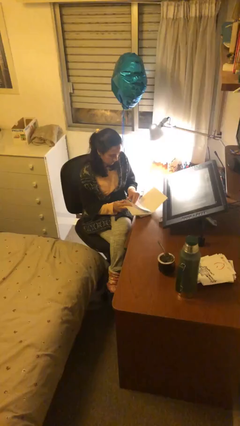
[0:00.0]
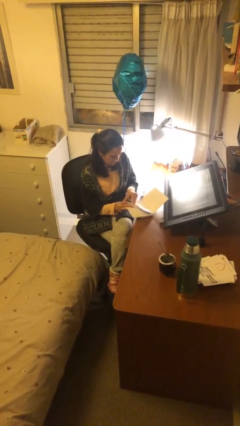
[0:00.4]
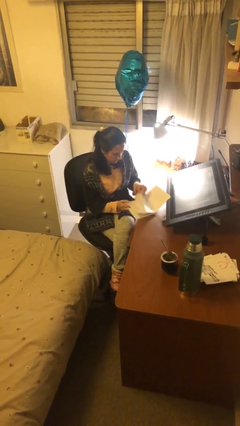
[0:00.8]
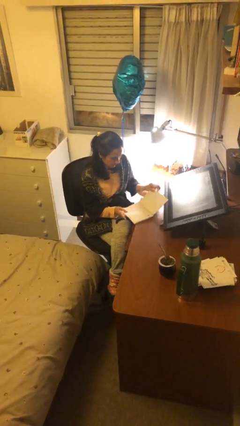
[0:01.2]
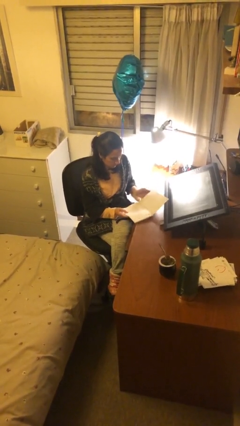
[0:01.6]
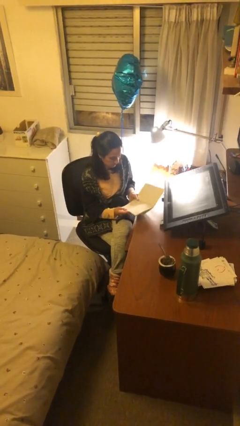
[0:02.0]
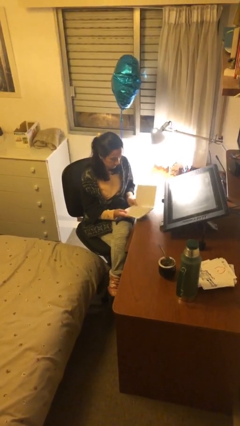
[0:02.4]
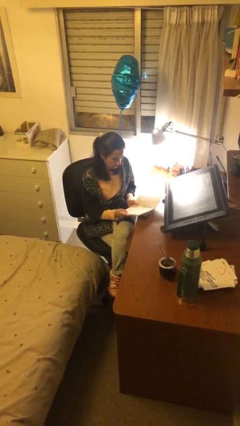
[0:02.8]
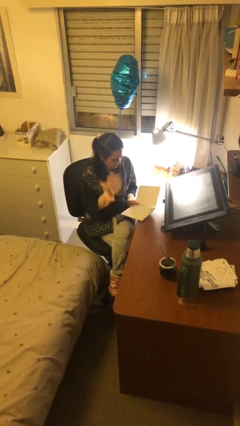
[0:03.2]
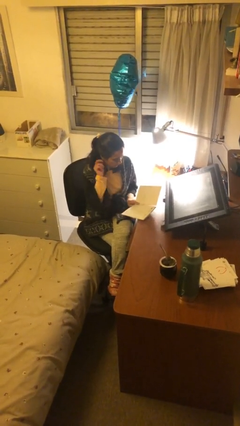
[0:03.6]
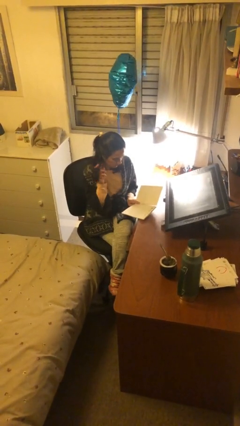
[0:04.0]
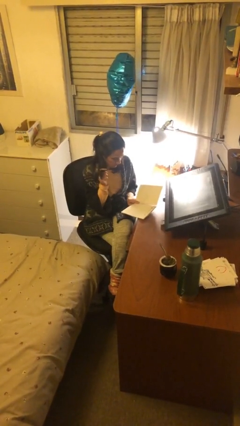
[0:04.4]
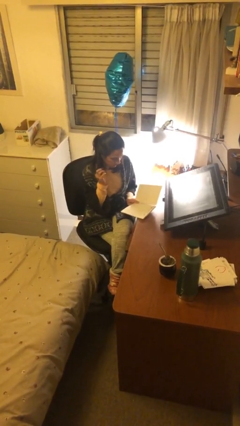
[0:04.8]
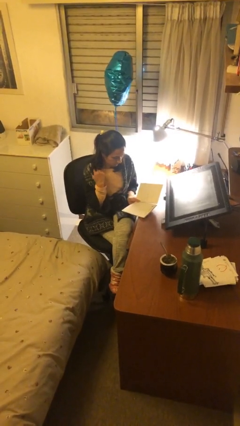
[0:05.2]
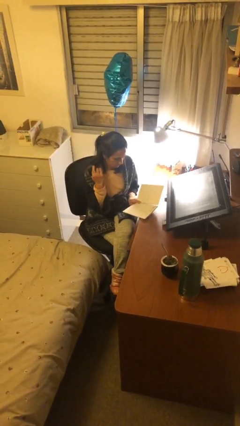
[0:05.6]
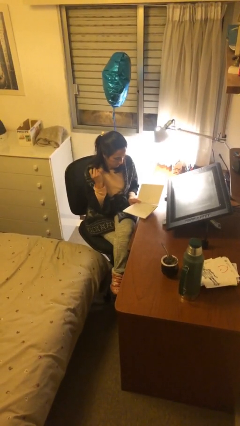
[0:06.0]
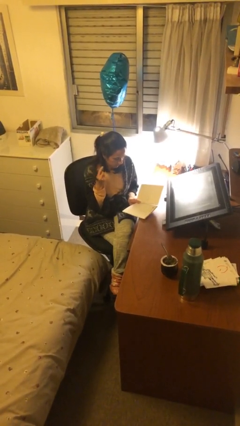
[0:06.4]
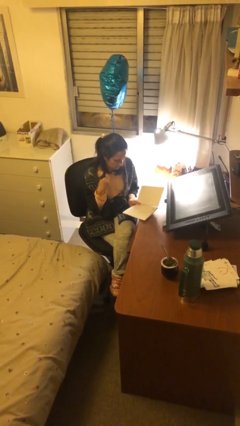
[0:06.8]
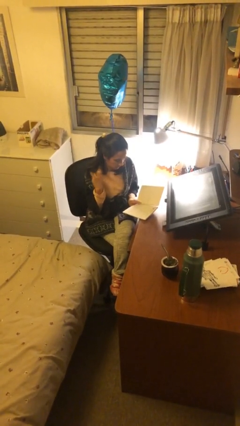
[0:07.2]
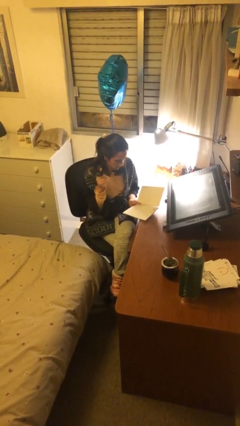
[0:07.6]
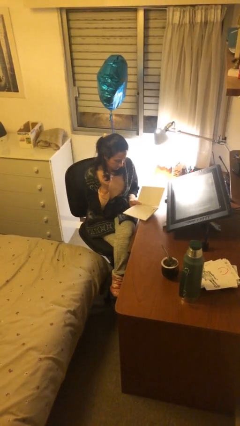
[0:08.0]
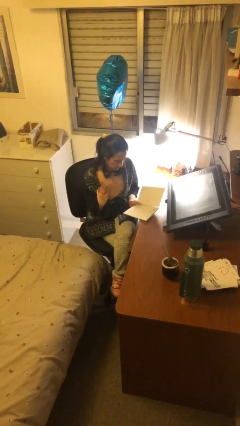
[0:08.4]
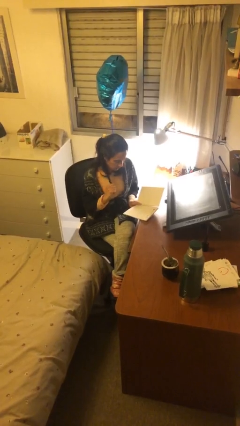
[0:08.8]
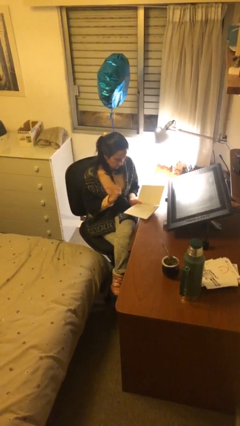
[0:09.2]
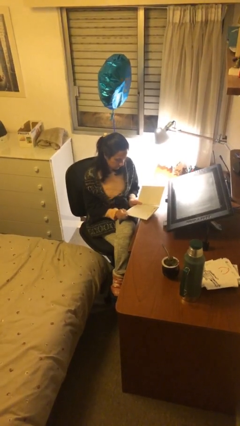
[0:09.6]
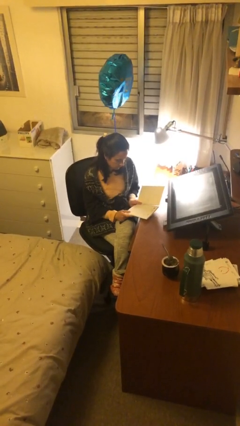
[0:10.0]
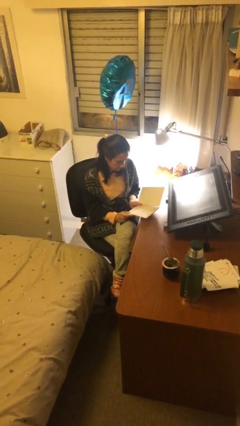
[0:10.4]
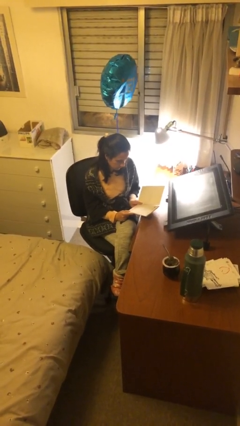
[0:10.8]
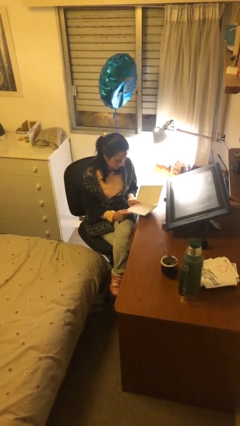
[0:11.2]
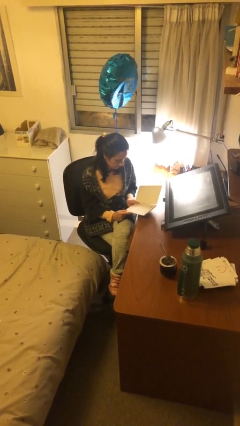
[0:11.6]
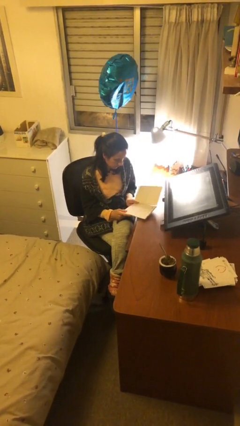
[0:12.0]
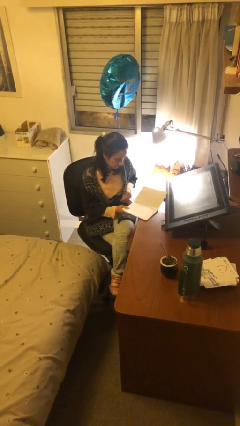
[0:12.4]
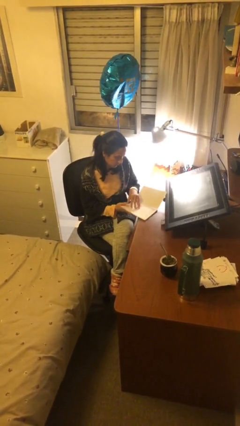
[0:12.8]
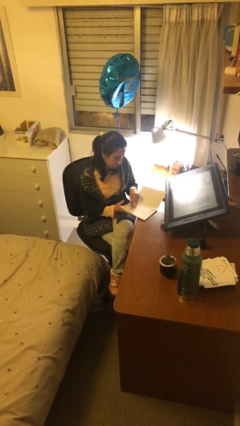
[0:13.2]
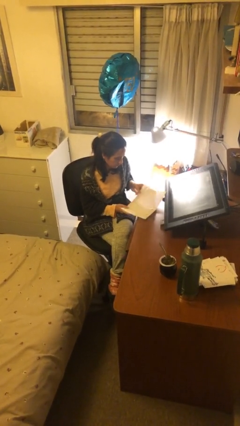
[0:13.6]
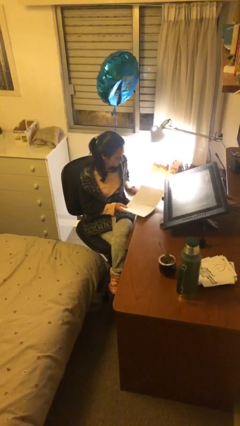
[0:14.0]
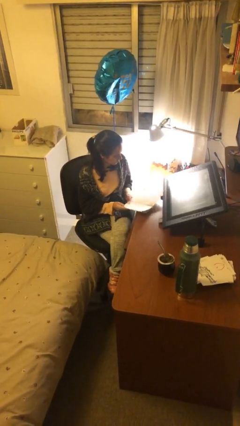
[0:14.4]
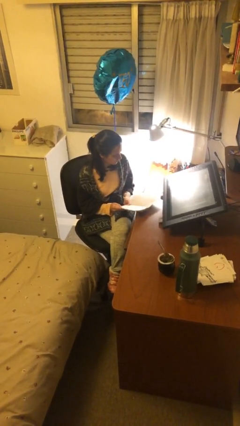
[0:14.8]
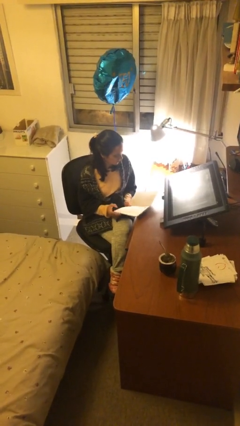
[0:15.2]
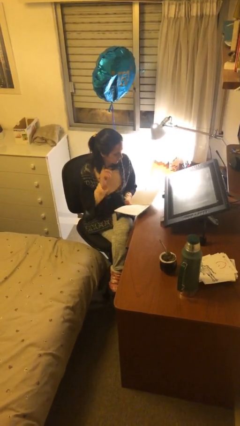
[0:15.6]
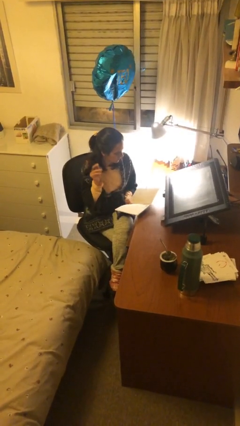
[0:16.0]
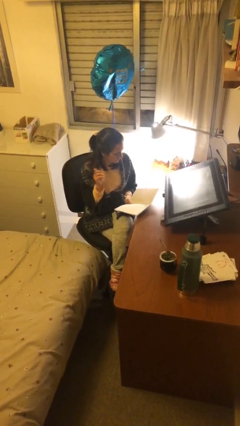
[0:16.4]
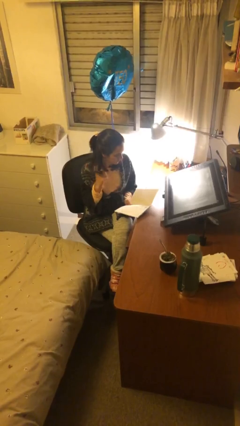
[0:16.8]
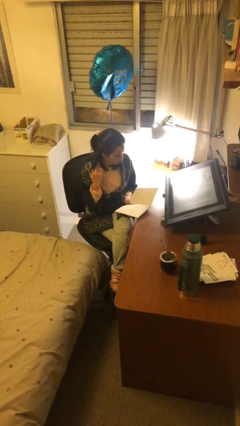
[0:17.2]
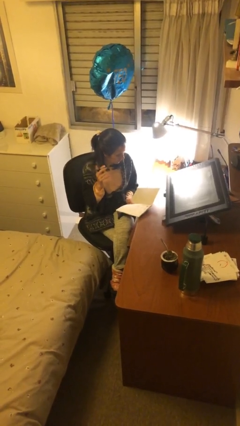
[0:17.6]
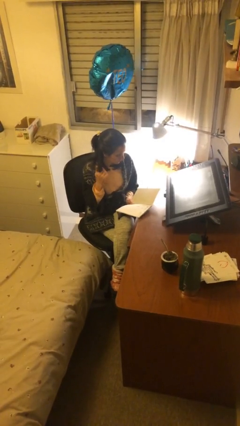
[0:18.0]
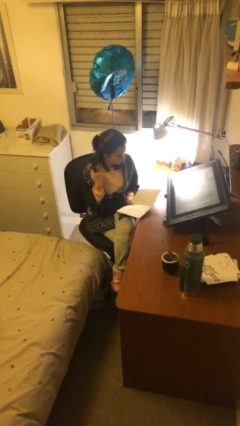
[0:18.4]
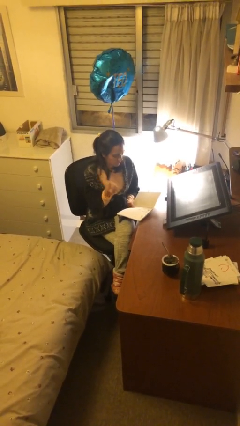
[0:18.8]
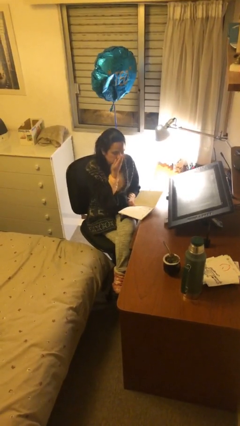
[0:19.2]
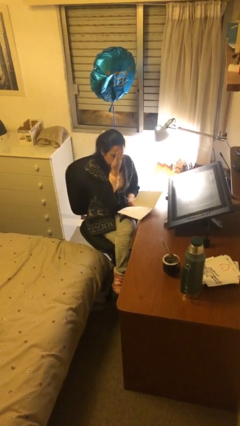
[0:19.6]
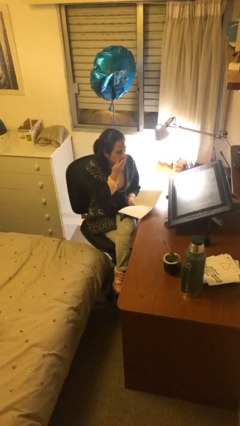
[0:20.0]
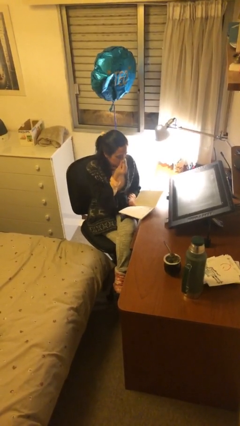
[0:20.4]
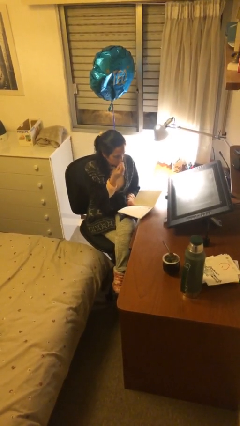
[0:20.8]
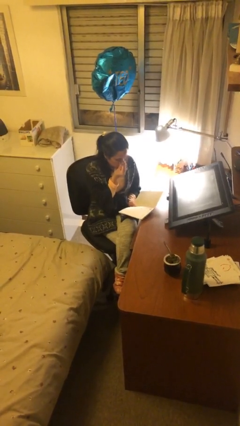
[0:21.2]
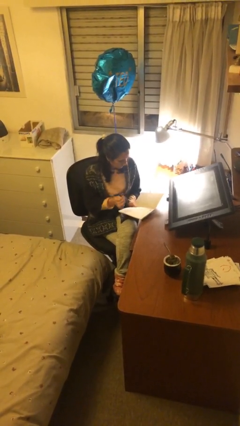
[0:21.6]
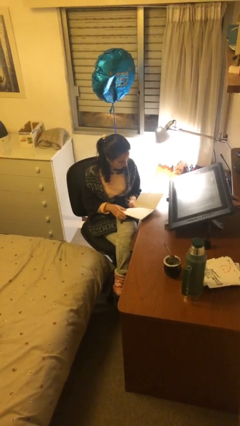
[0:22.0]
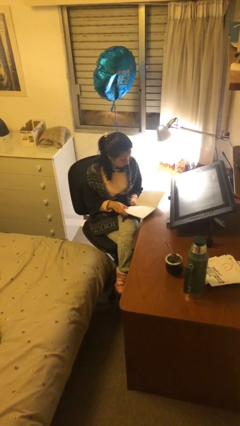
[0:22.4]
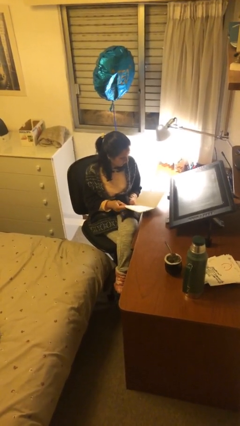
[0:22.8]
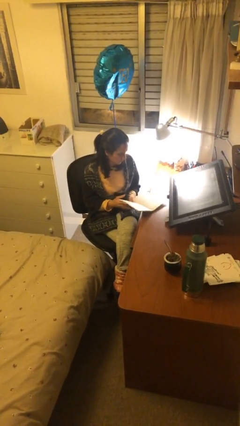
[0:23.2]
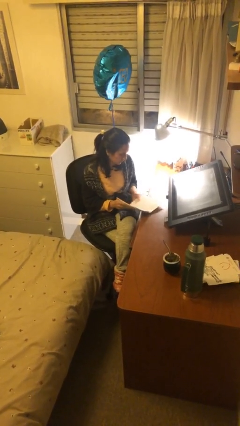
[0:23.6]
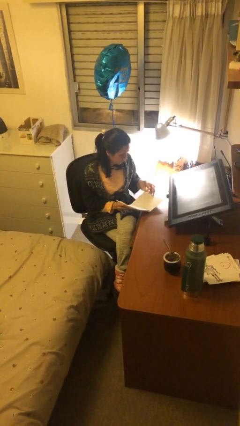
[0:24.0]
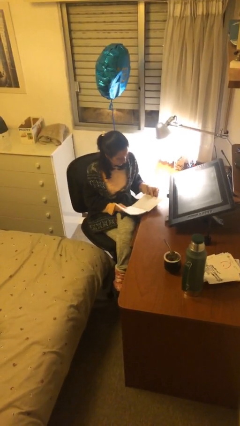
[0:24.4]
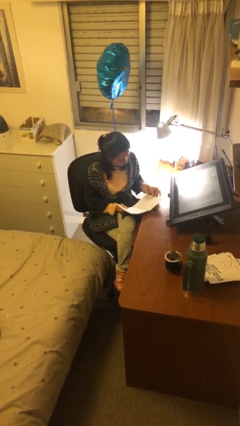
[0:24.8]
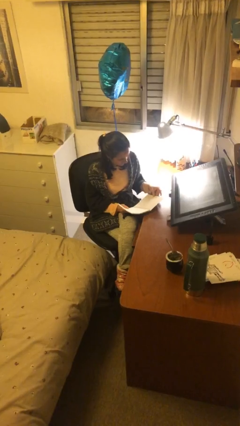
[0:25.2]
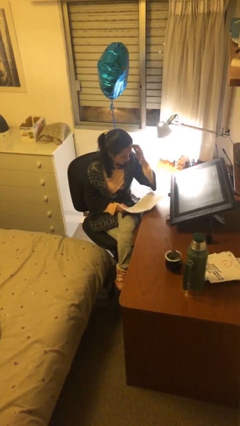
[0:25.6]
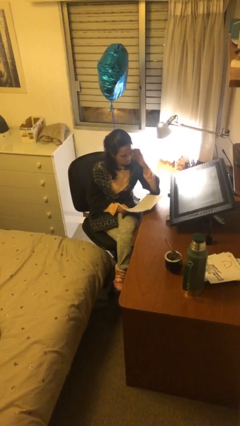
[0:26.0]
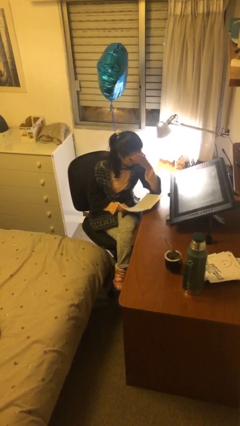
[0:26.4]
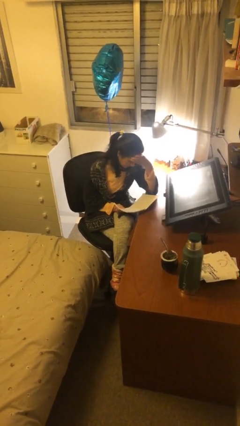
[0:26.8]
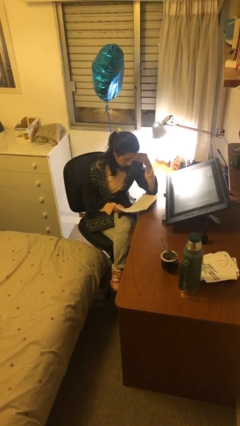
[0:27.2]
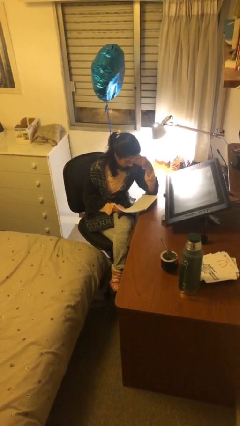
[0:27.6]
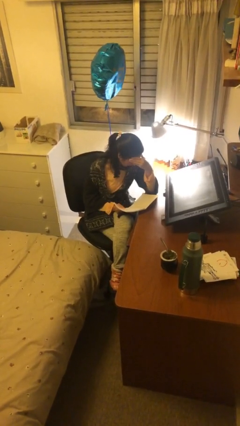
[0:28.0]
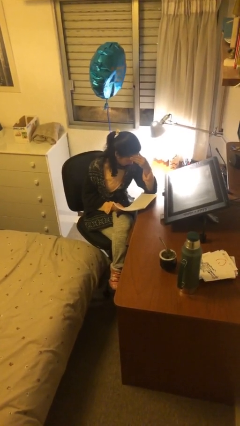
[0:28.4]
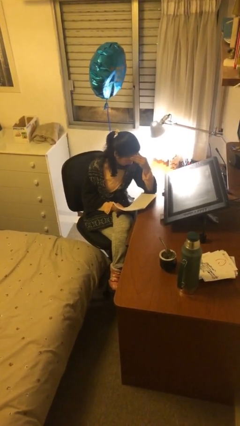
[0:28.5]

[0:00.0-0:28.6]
person reads document

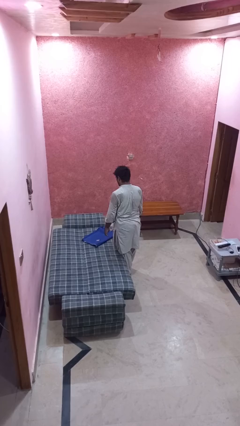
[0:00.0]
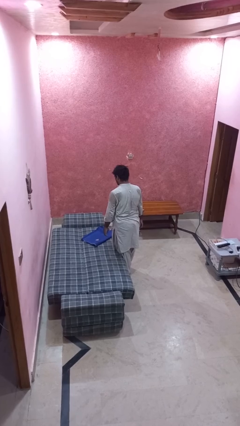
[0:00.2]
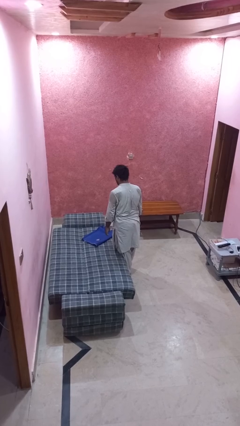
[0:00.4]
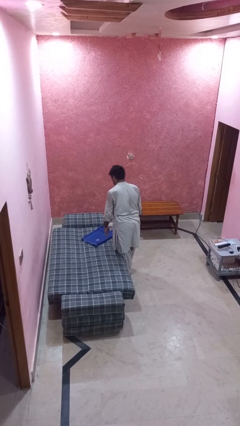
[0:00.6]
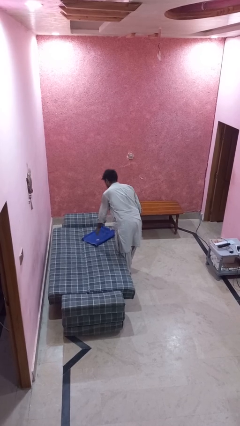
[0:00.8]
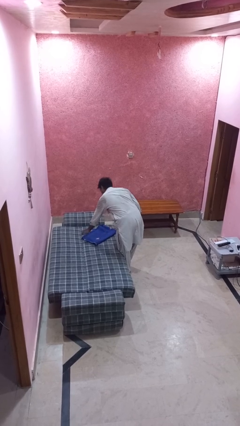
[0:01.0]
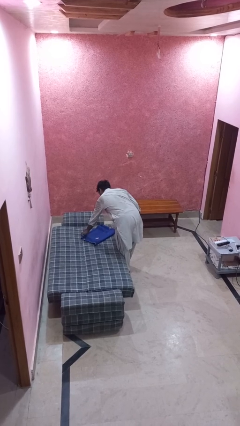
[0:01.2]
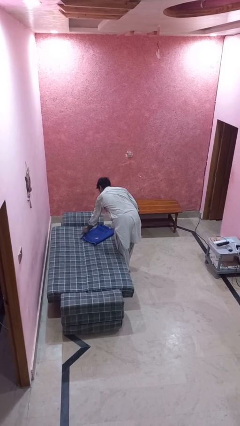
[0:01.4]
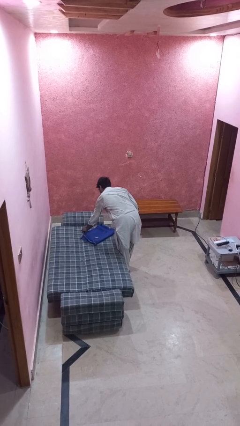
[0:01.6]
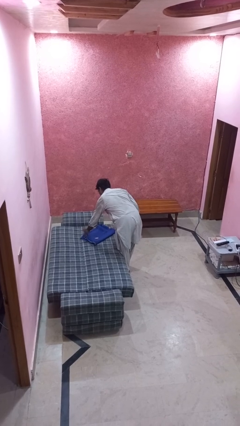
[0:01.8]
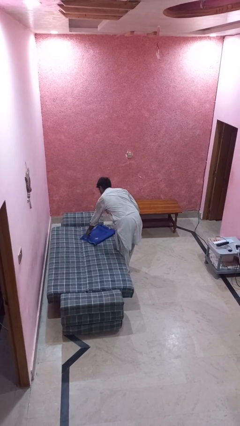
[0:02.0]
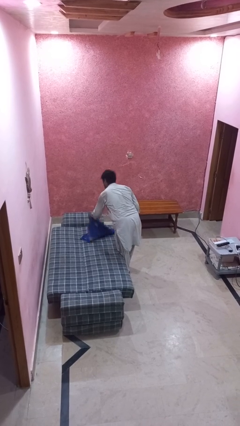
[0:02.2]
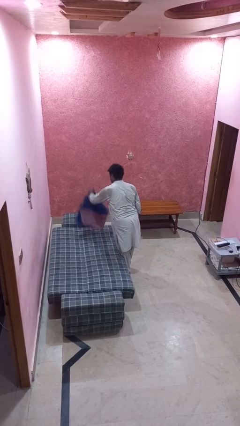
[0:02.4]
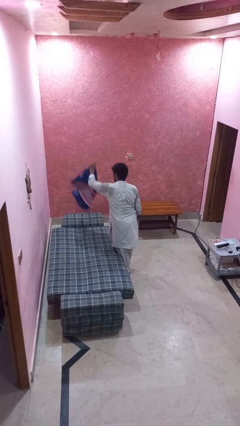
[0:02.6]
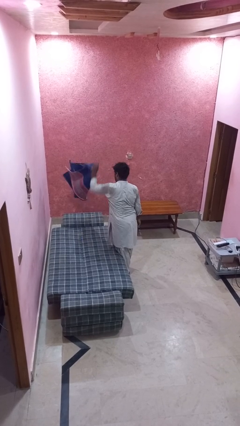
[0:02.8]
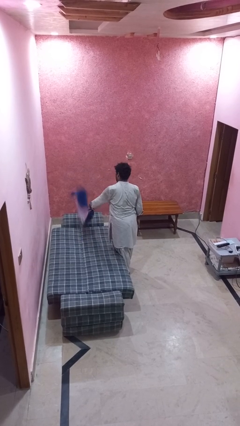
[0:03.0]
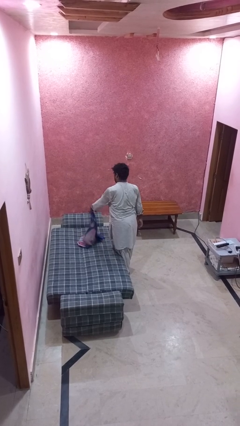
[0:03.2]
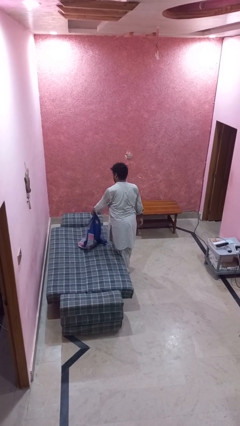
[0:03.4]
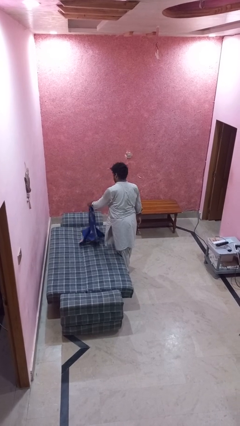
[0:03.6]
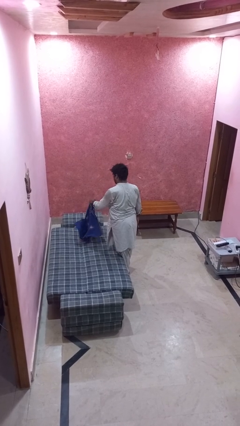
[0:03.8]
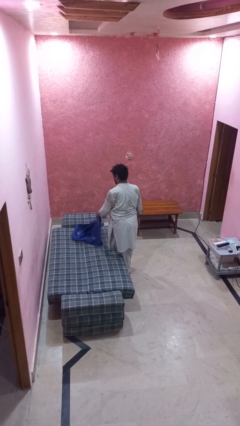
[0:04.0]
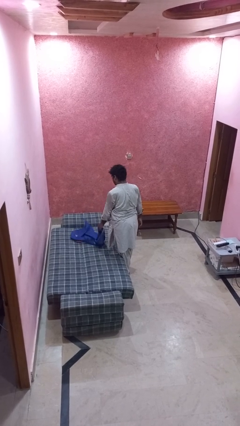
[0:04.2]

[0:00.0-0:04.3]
person unfolds blanket
